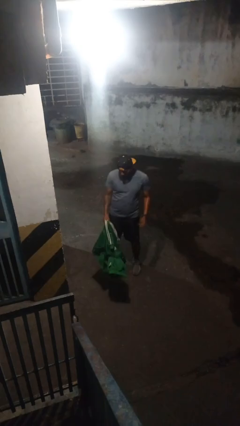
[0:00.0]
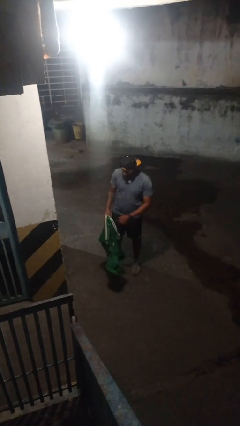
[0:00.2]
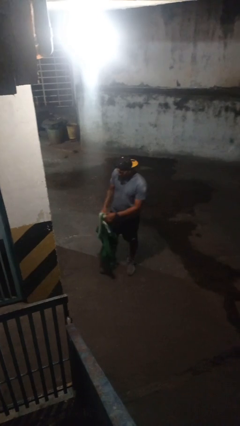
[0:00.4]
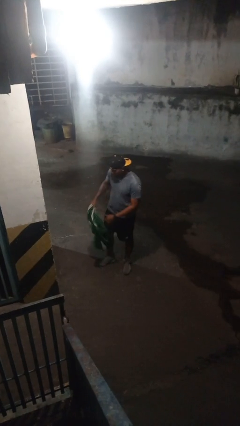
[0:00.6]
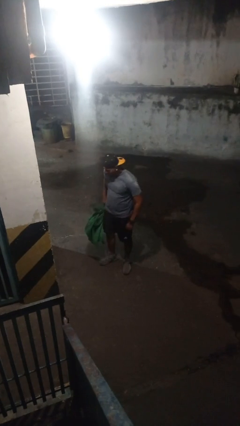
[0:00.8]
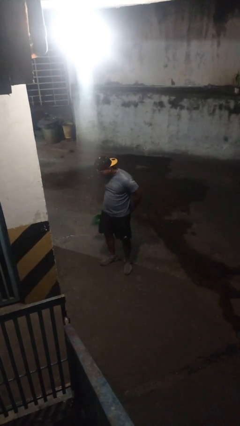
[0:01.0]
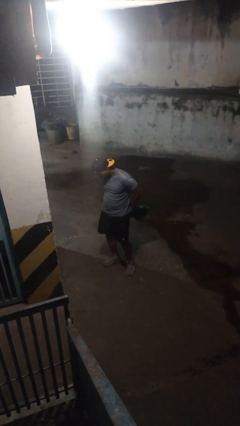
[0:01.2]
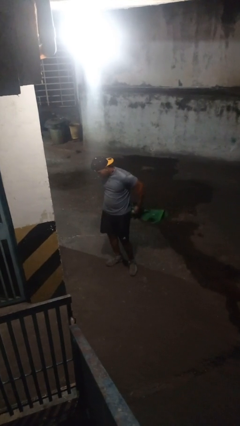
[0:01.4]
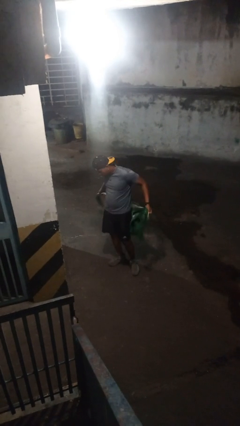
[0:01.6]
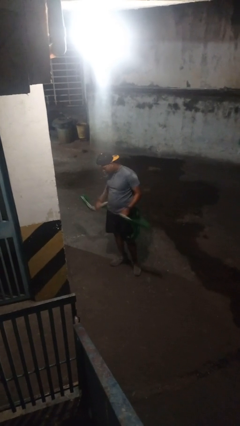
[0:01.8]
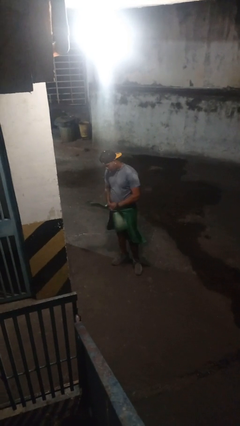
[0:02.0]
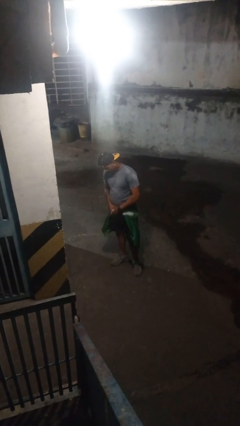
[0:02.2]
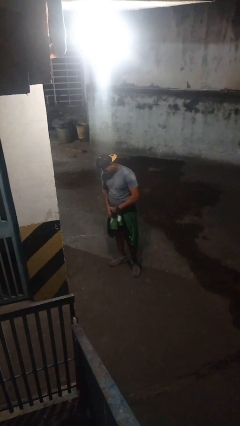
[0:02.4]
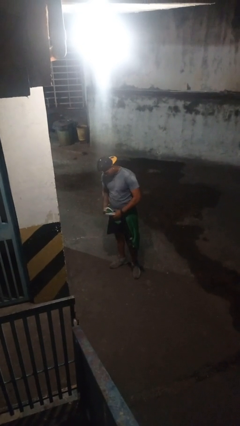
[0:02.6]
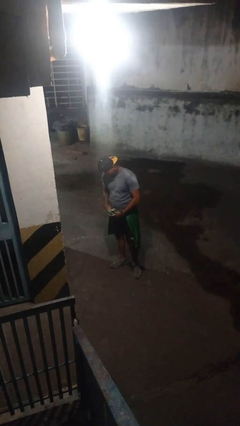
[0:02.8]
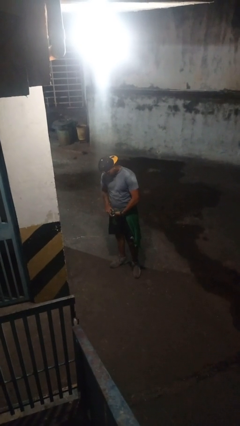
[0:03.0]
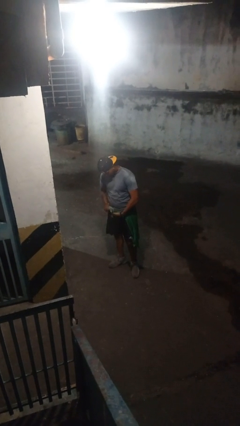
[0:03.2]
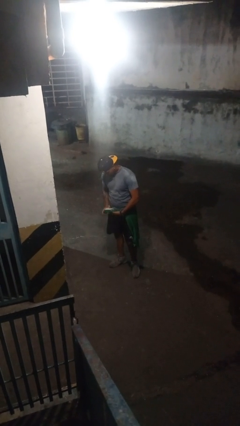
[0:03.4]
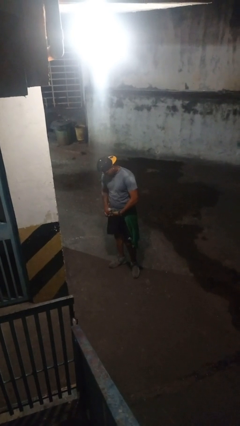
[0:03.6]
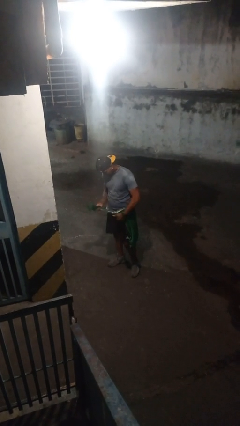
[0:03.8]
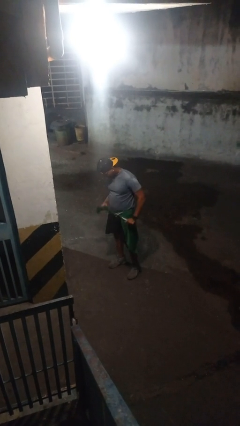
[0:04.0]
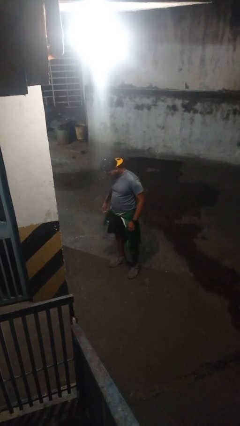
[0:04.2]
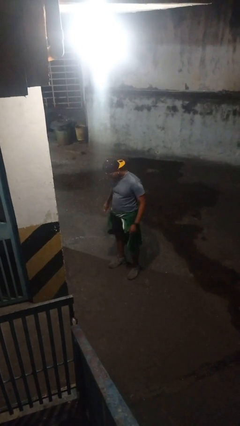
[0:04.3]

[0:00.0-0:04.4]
person ties jacket around waist

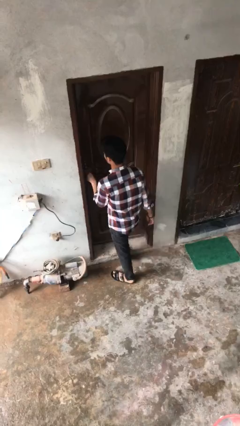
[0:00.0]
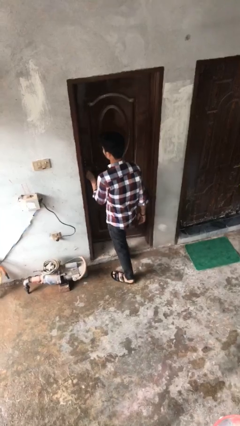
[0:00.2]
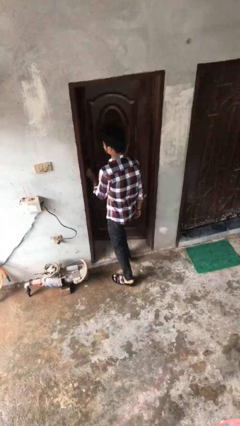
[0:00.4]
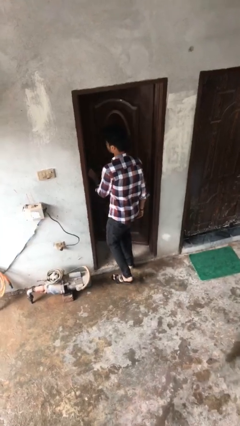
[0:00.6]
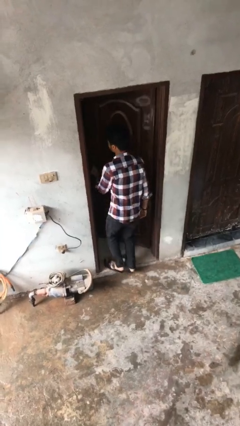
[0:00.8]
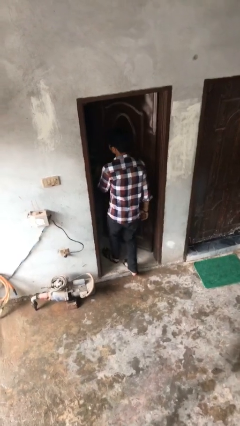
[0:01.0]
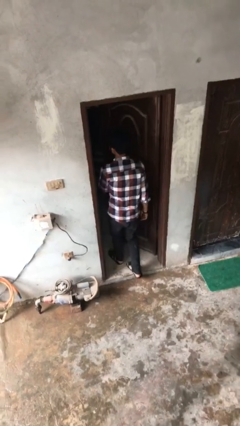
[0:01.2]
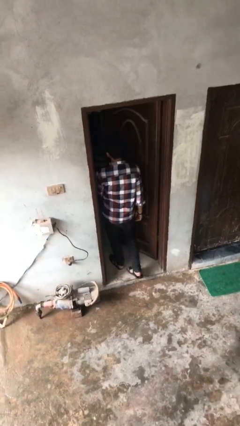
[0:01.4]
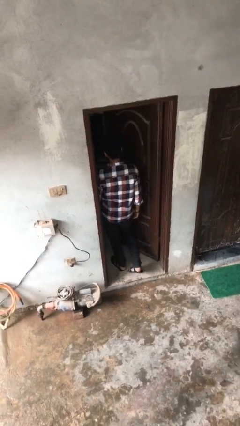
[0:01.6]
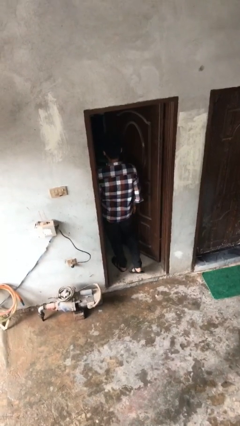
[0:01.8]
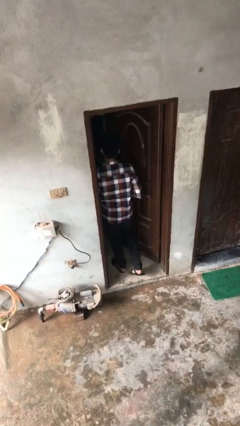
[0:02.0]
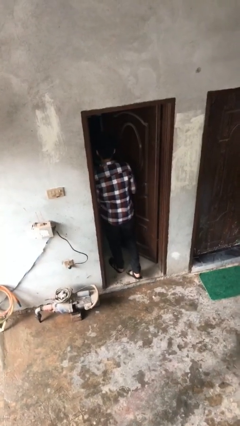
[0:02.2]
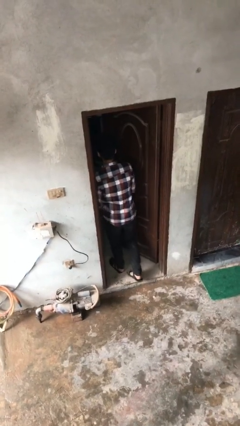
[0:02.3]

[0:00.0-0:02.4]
person opens facility door

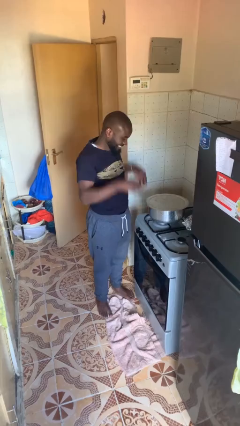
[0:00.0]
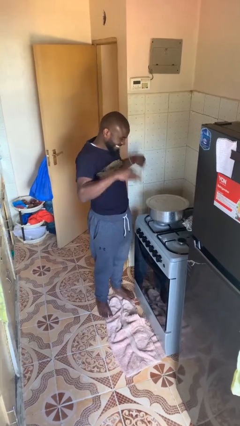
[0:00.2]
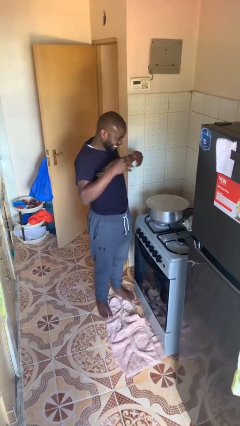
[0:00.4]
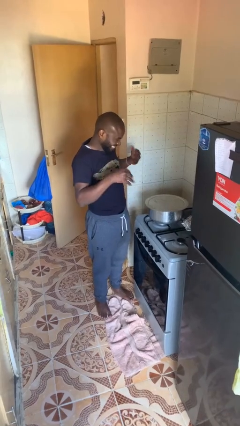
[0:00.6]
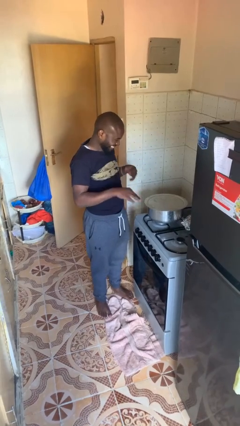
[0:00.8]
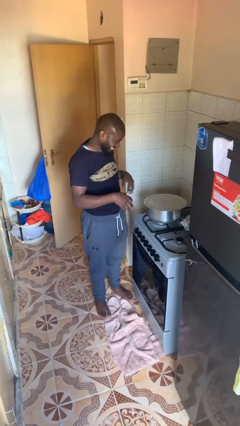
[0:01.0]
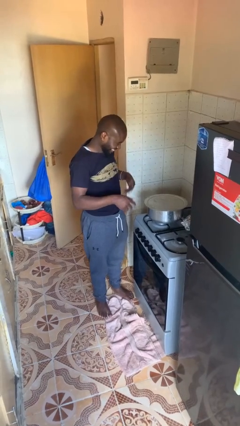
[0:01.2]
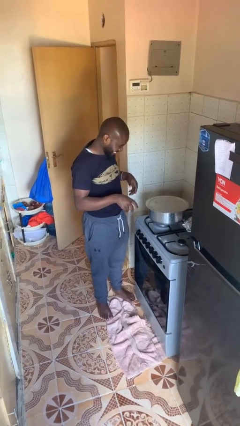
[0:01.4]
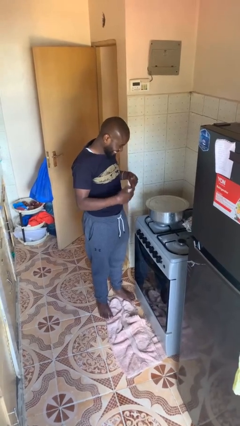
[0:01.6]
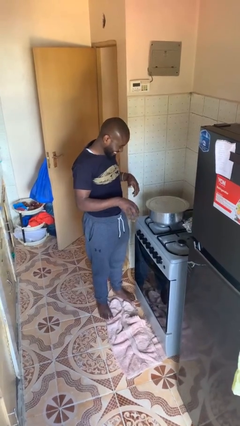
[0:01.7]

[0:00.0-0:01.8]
person burns hand

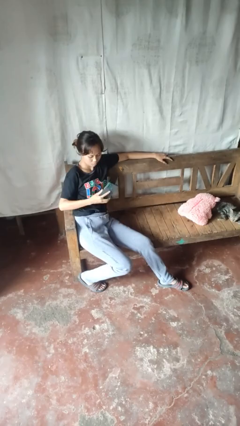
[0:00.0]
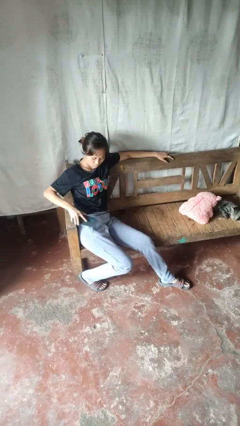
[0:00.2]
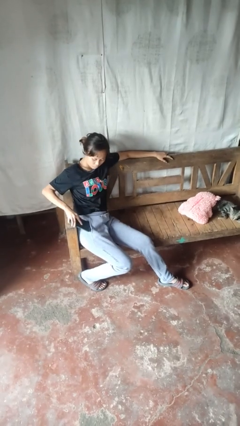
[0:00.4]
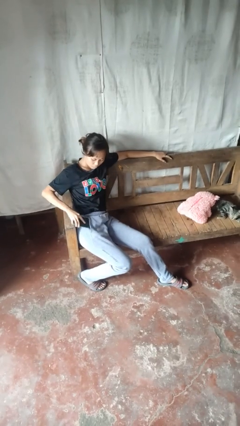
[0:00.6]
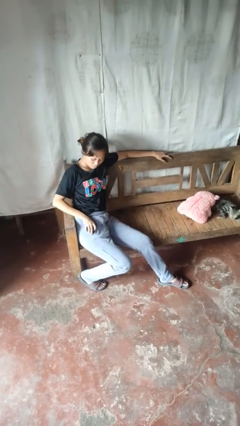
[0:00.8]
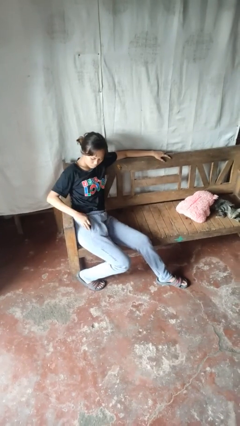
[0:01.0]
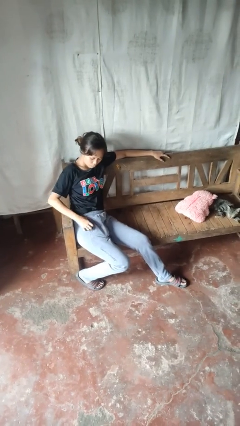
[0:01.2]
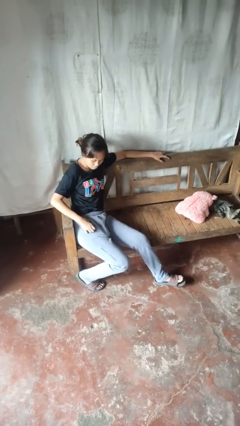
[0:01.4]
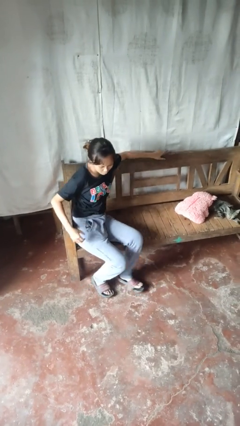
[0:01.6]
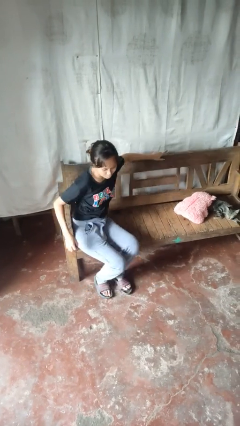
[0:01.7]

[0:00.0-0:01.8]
person puts phone into pocket

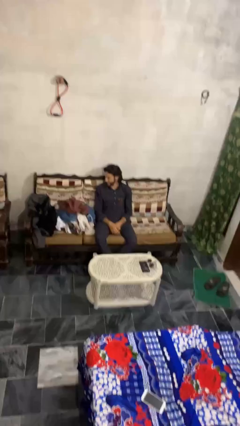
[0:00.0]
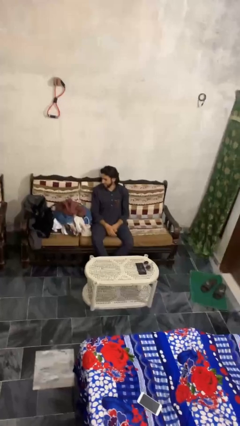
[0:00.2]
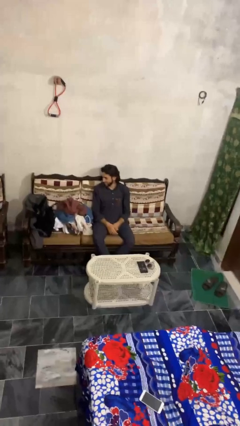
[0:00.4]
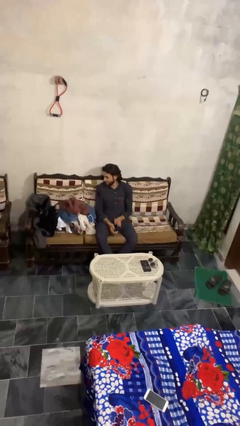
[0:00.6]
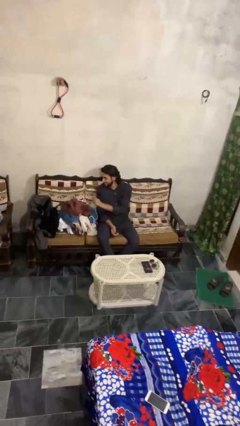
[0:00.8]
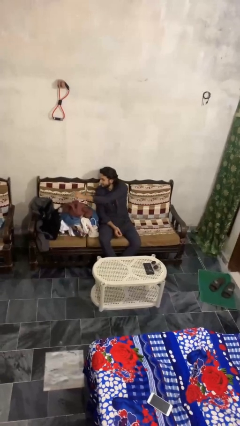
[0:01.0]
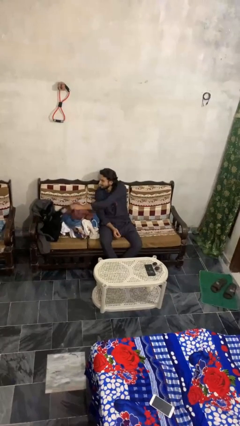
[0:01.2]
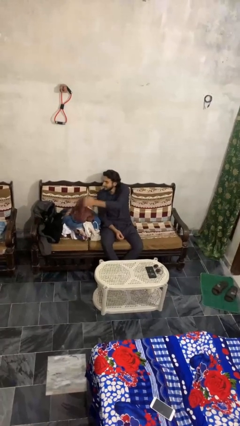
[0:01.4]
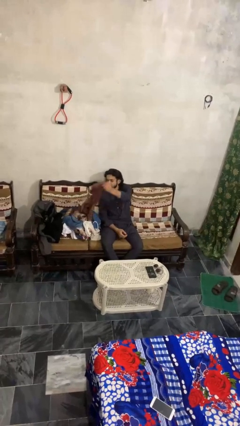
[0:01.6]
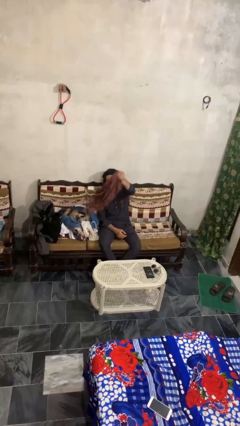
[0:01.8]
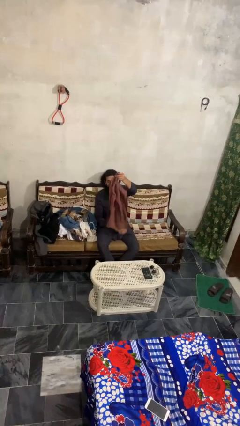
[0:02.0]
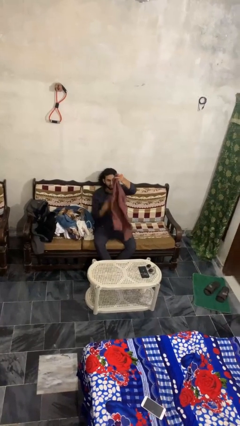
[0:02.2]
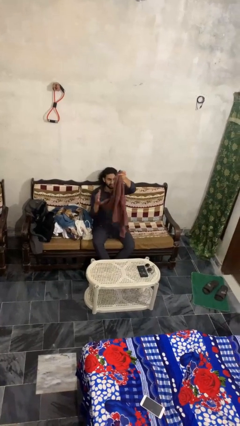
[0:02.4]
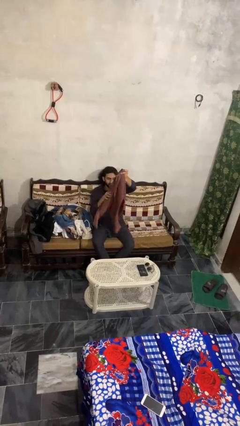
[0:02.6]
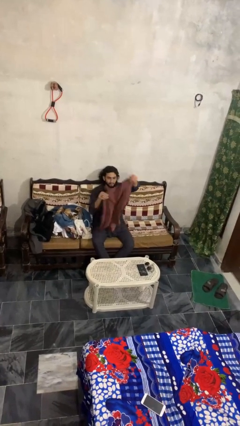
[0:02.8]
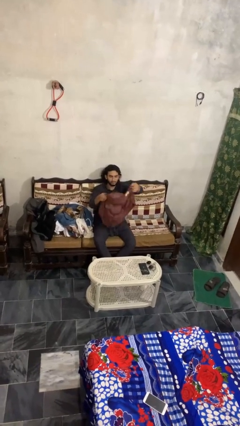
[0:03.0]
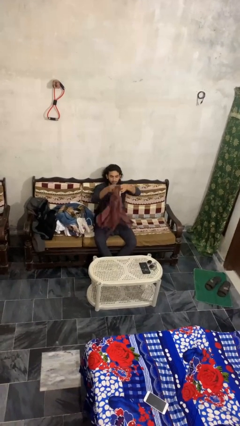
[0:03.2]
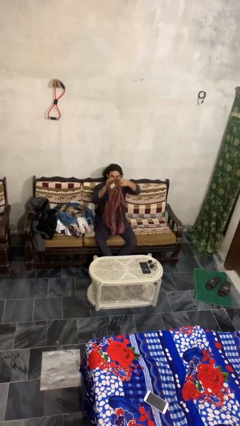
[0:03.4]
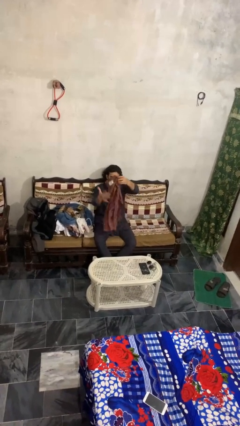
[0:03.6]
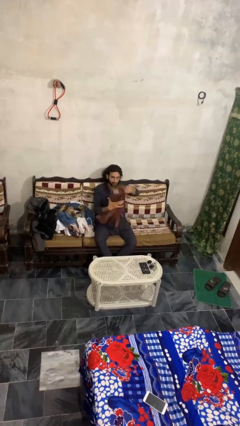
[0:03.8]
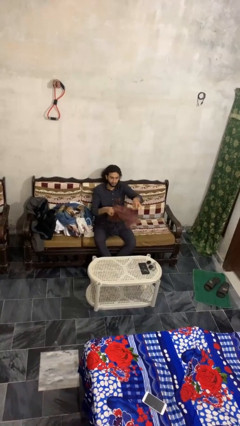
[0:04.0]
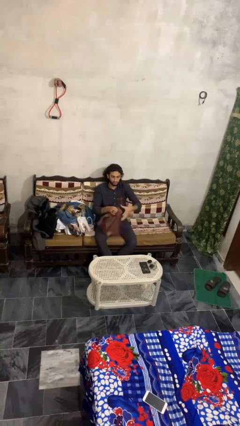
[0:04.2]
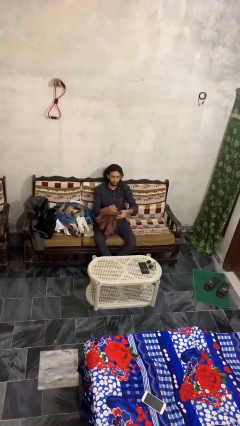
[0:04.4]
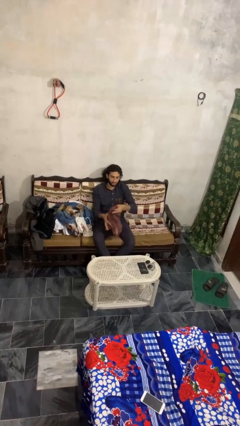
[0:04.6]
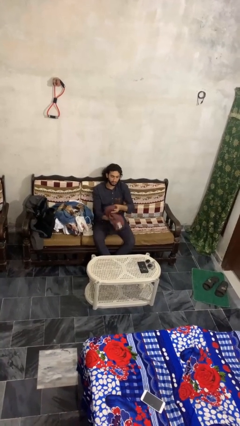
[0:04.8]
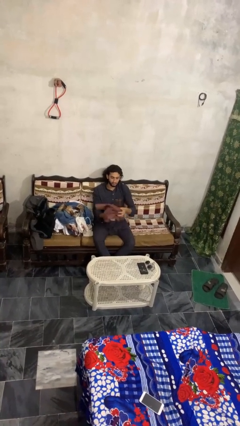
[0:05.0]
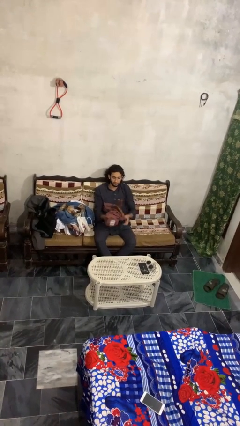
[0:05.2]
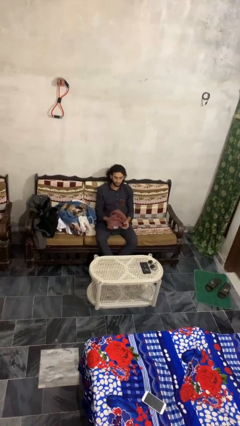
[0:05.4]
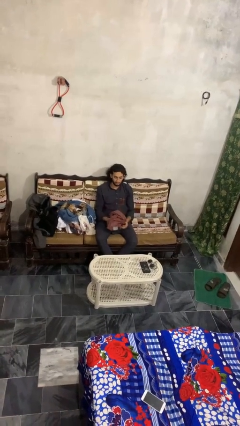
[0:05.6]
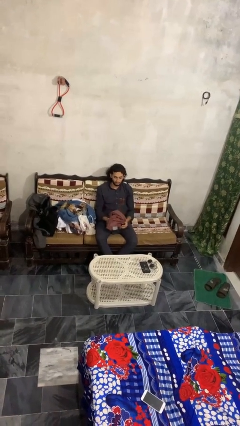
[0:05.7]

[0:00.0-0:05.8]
person folds shirt

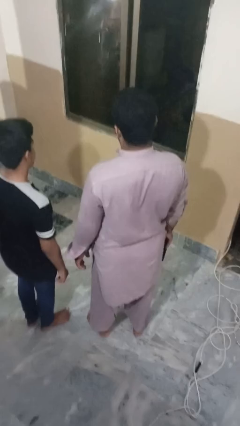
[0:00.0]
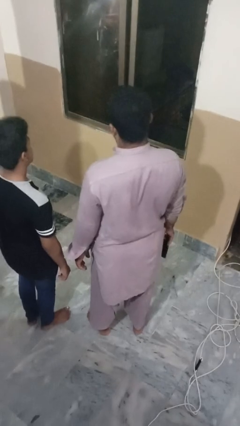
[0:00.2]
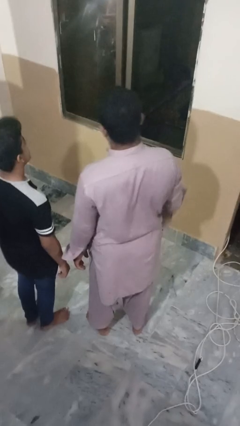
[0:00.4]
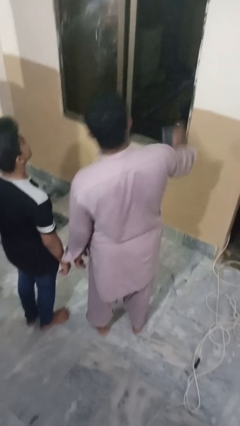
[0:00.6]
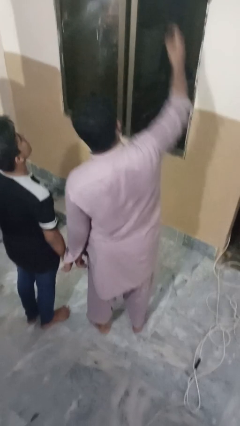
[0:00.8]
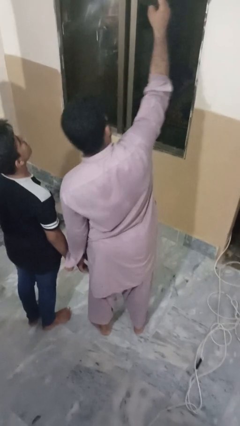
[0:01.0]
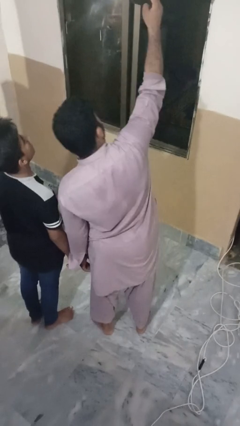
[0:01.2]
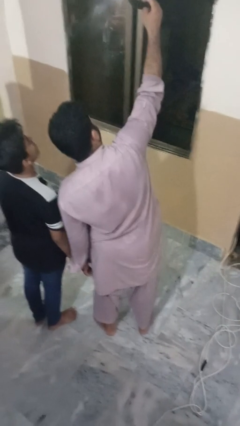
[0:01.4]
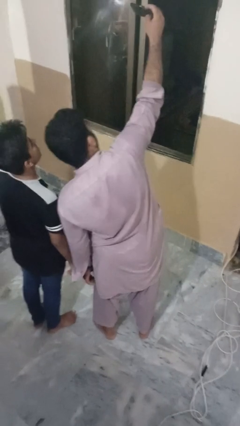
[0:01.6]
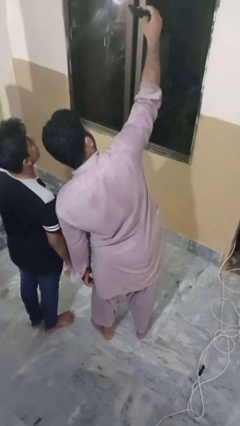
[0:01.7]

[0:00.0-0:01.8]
person takes selfie with person

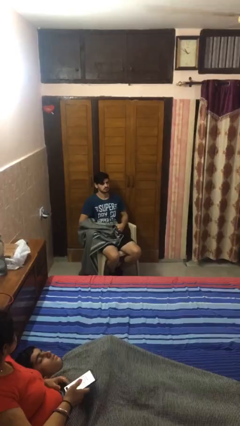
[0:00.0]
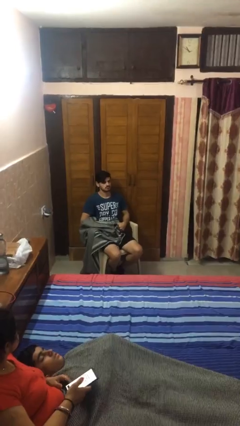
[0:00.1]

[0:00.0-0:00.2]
person covers with blanket
